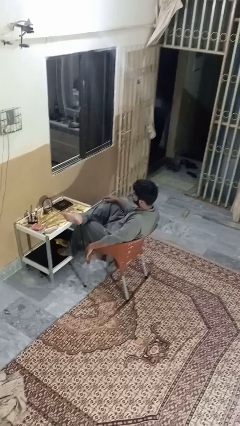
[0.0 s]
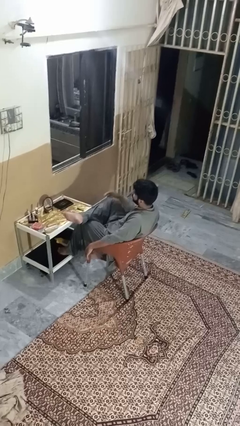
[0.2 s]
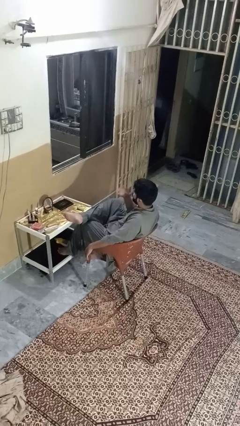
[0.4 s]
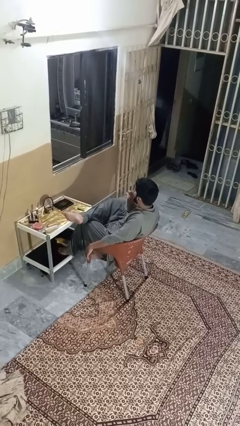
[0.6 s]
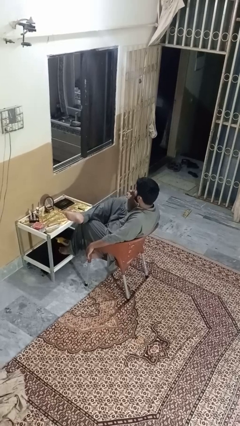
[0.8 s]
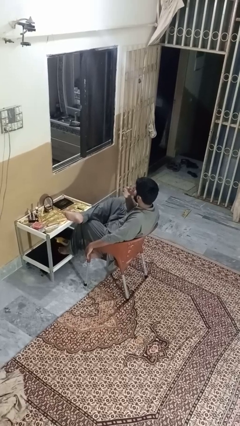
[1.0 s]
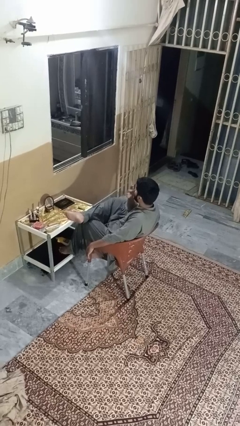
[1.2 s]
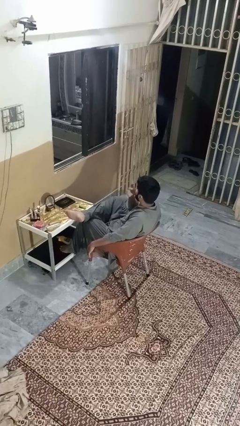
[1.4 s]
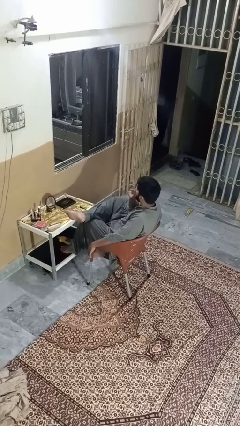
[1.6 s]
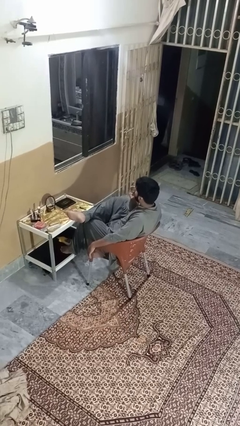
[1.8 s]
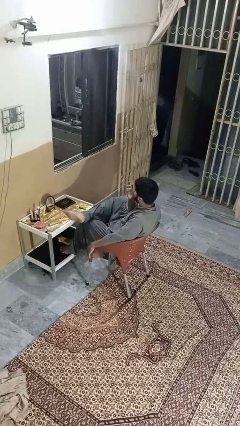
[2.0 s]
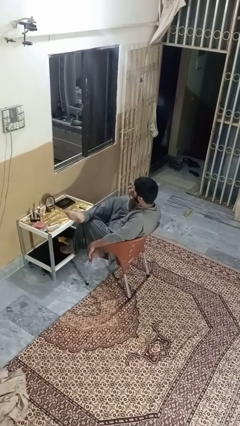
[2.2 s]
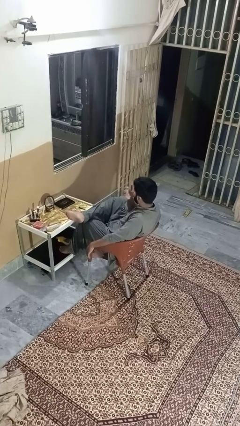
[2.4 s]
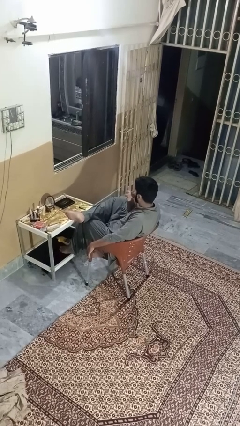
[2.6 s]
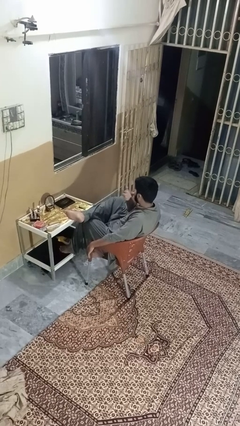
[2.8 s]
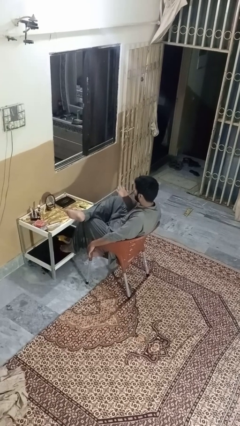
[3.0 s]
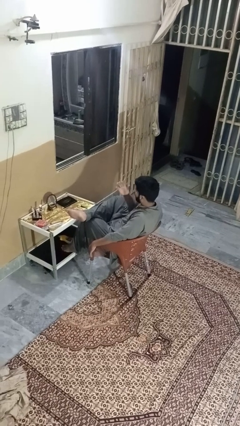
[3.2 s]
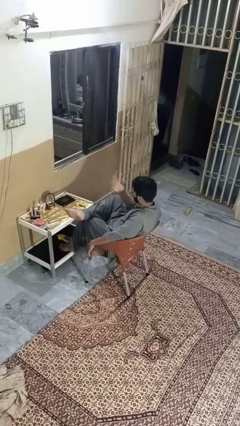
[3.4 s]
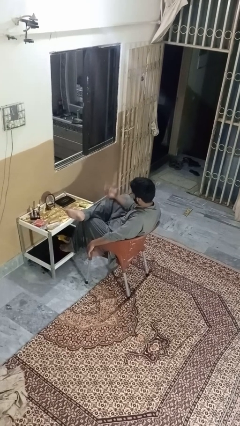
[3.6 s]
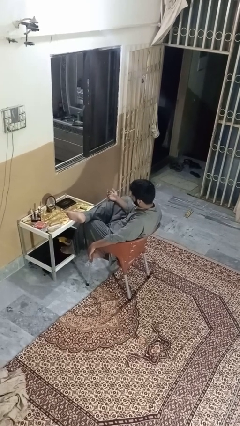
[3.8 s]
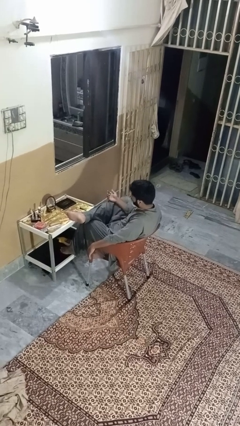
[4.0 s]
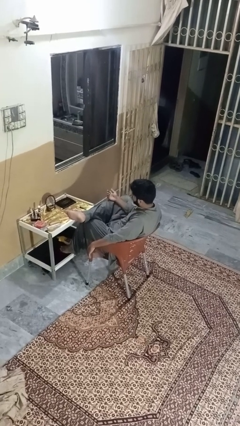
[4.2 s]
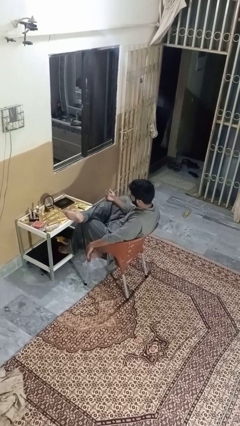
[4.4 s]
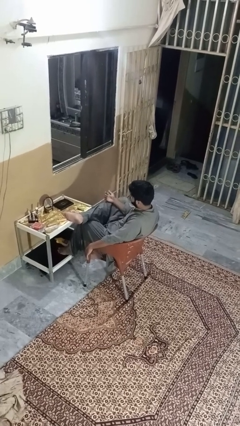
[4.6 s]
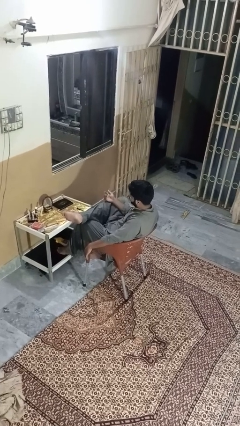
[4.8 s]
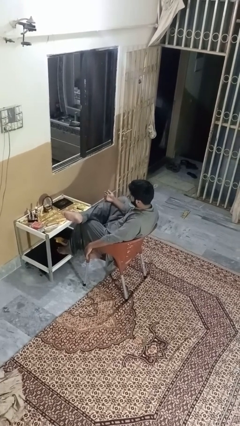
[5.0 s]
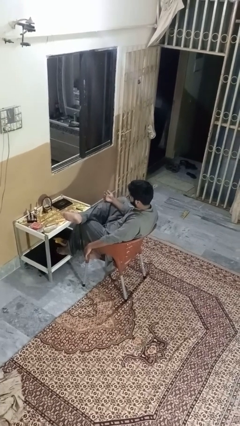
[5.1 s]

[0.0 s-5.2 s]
person licks fingers

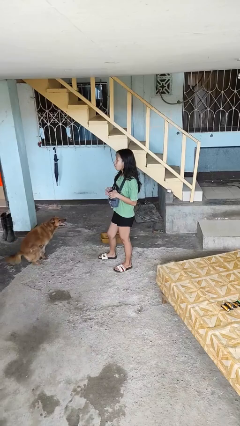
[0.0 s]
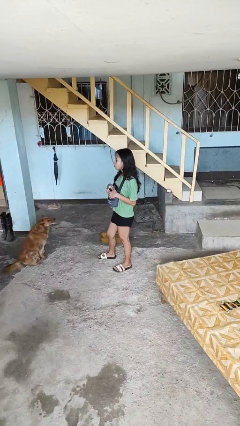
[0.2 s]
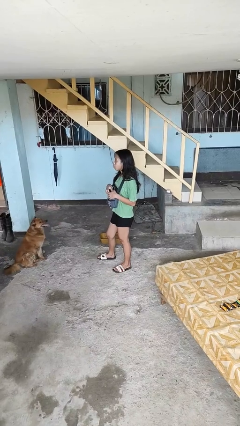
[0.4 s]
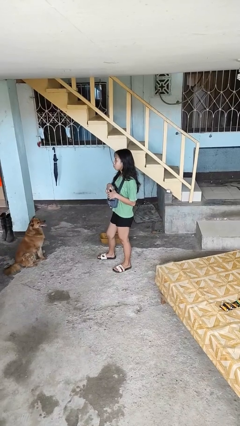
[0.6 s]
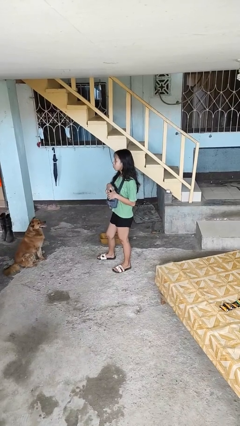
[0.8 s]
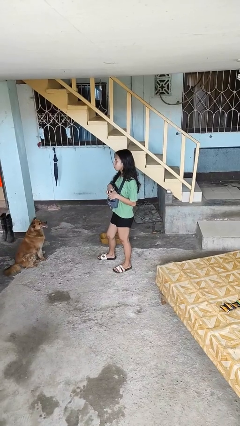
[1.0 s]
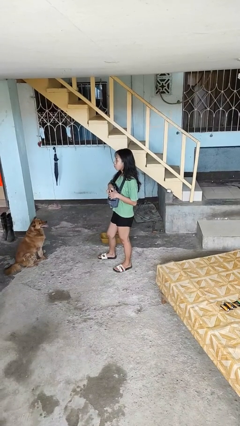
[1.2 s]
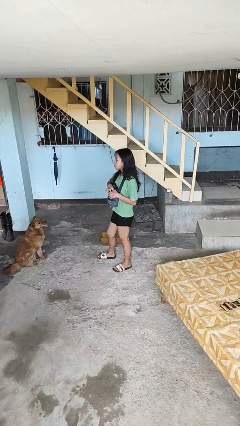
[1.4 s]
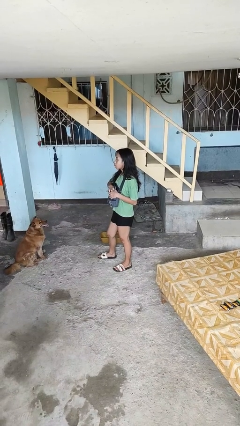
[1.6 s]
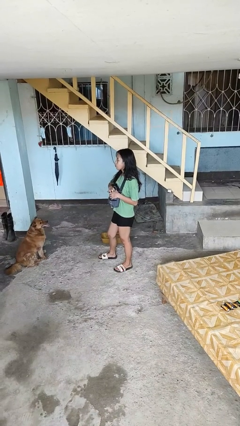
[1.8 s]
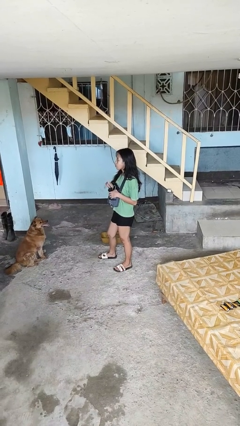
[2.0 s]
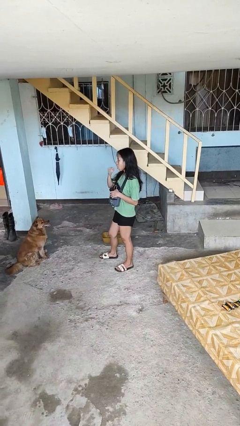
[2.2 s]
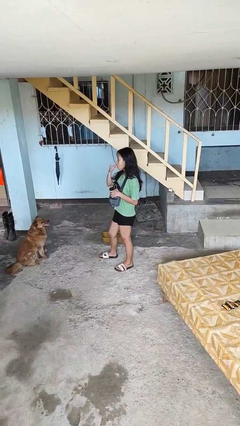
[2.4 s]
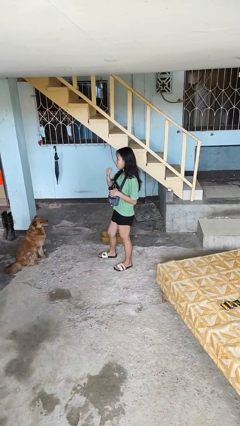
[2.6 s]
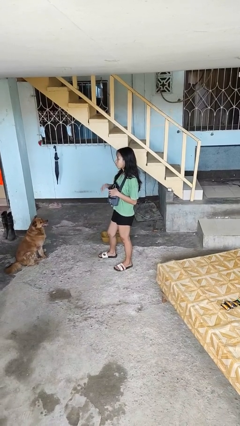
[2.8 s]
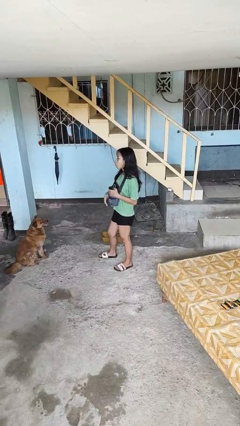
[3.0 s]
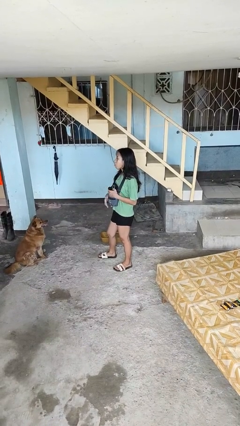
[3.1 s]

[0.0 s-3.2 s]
person eats snack from bag

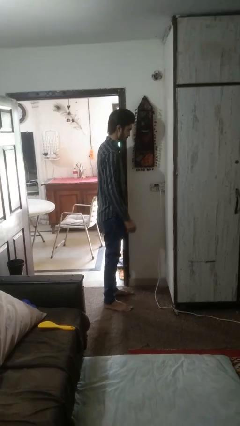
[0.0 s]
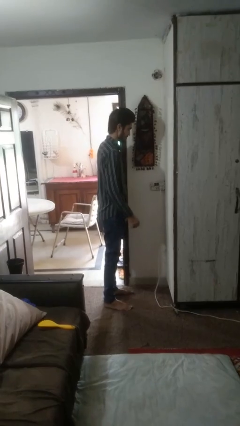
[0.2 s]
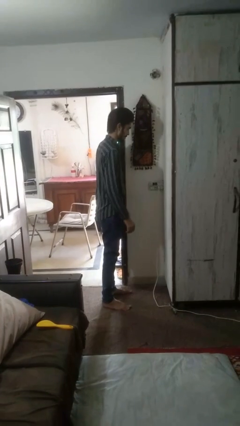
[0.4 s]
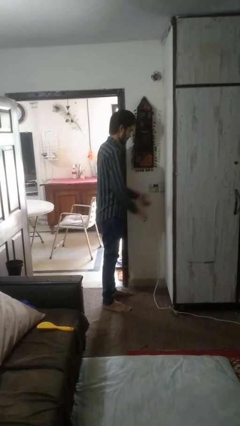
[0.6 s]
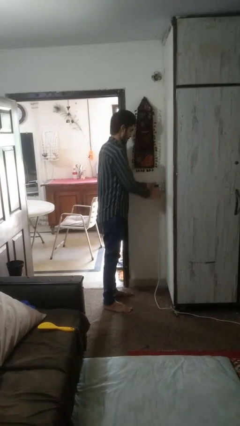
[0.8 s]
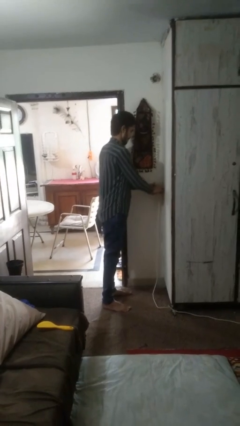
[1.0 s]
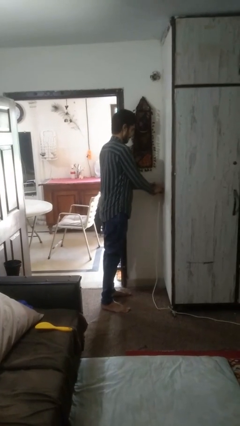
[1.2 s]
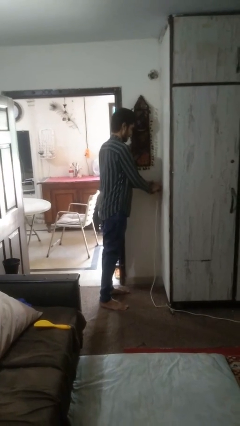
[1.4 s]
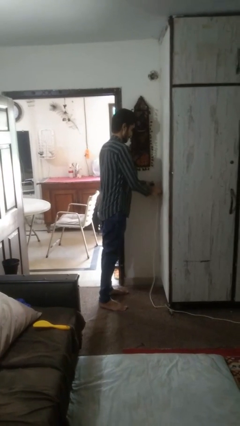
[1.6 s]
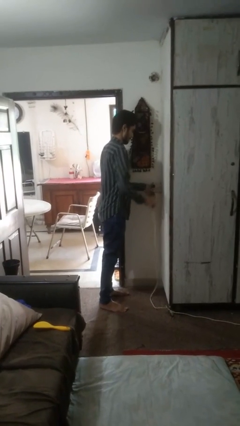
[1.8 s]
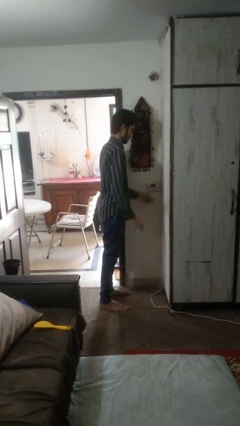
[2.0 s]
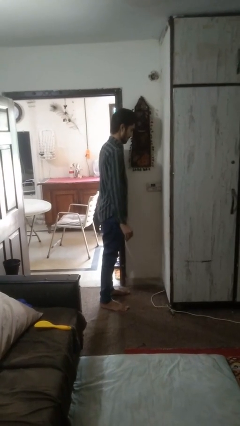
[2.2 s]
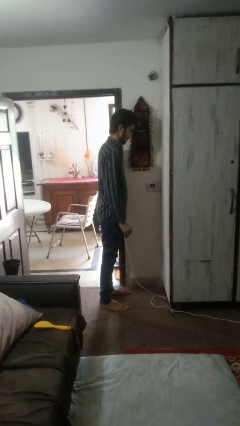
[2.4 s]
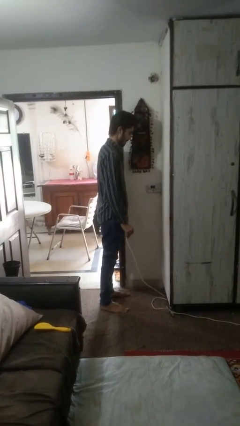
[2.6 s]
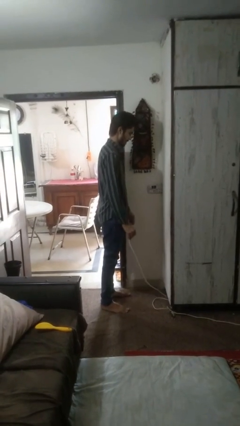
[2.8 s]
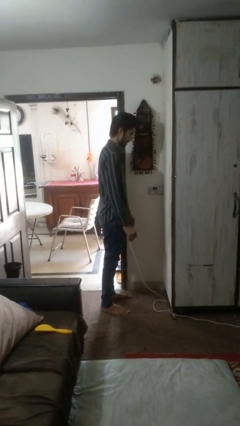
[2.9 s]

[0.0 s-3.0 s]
person unplugs from electrical socket

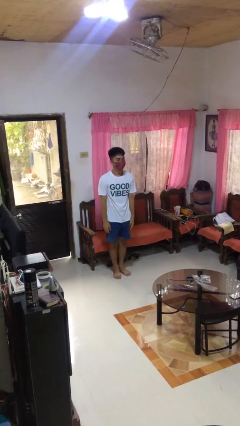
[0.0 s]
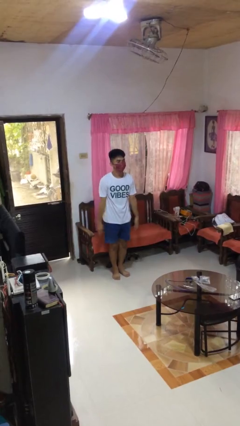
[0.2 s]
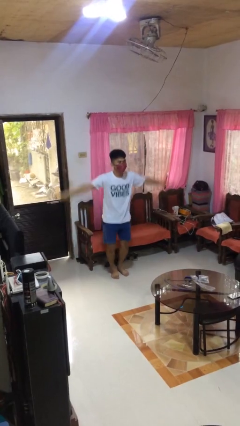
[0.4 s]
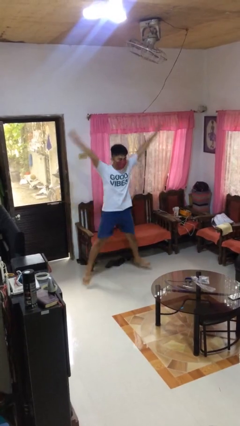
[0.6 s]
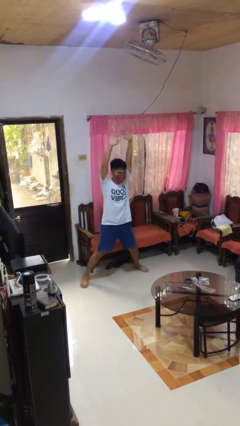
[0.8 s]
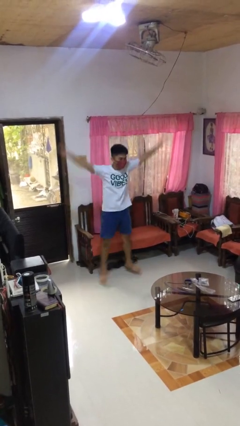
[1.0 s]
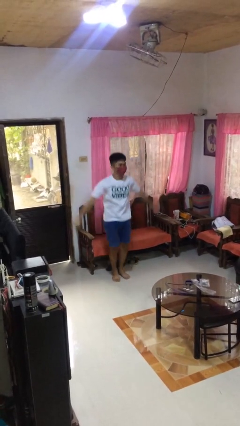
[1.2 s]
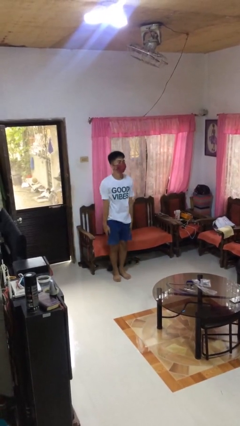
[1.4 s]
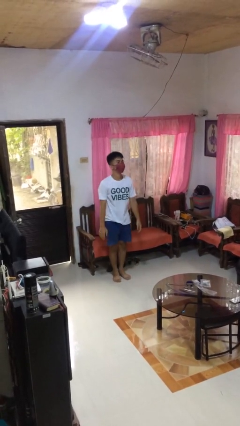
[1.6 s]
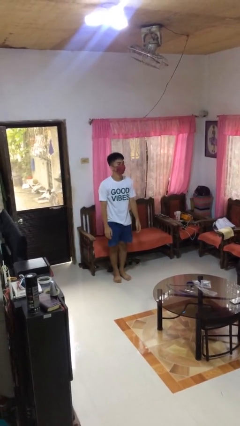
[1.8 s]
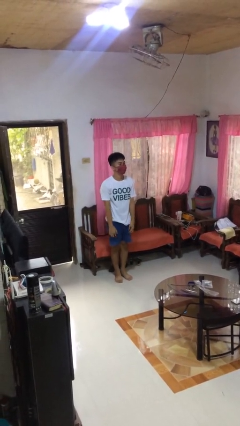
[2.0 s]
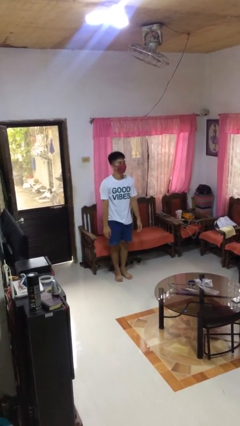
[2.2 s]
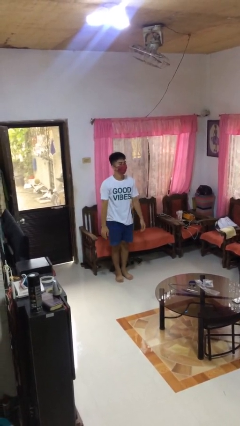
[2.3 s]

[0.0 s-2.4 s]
person exercises with jumping jacks

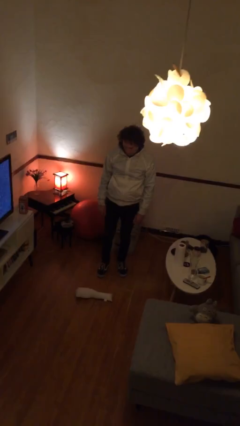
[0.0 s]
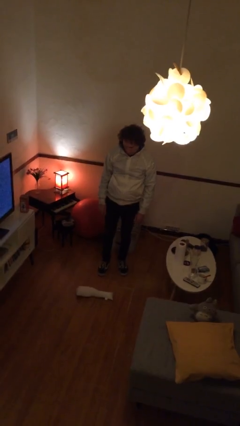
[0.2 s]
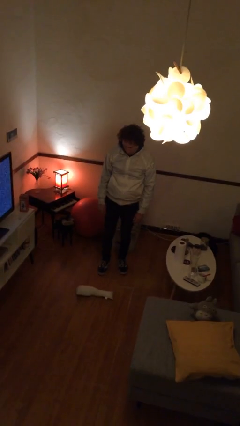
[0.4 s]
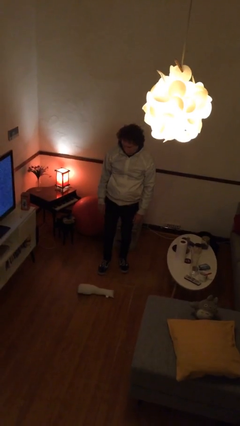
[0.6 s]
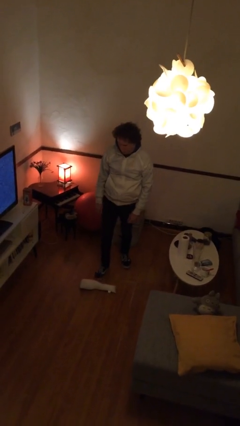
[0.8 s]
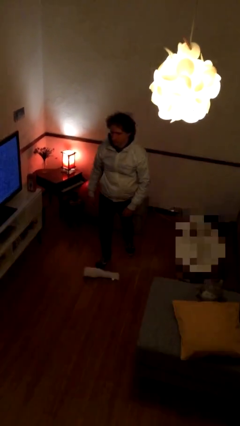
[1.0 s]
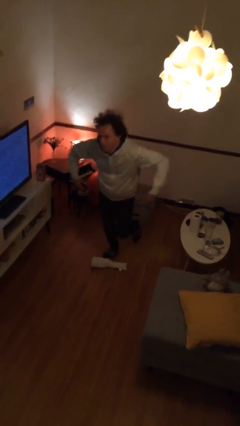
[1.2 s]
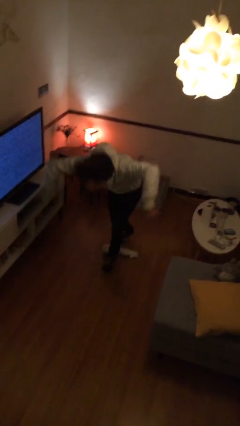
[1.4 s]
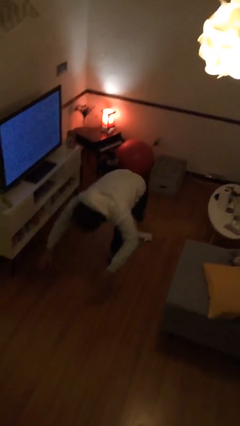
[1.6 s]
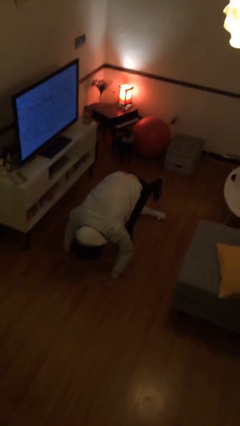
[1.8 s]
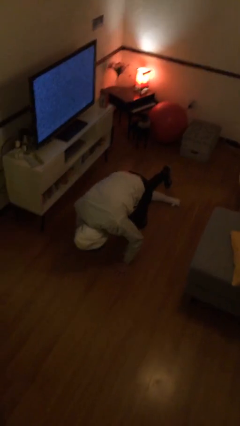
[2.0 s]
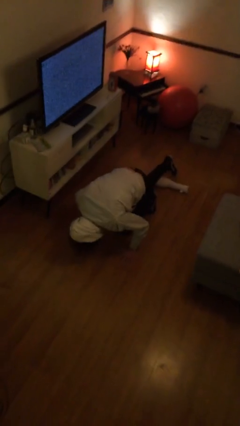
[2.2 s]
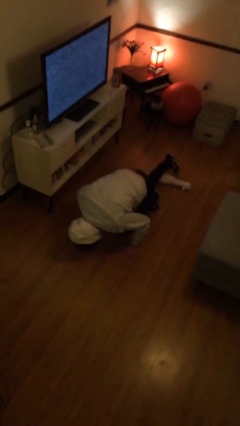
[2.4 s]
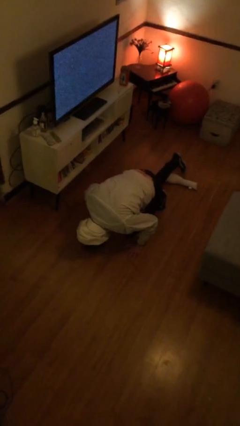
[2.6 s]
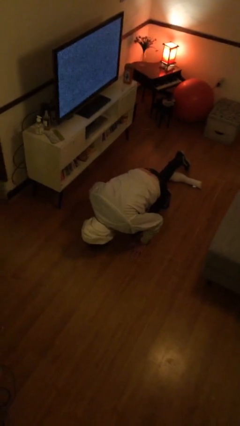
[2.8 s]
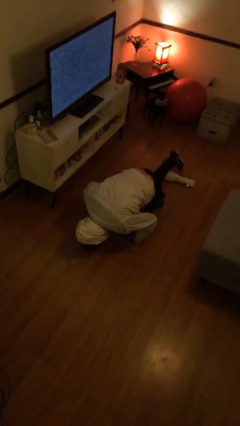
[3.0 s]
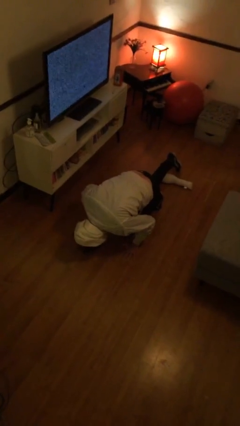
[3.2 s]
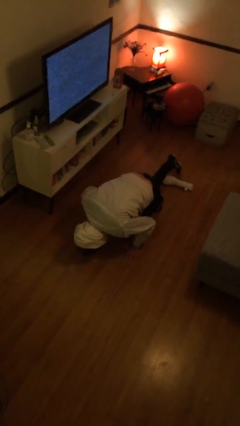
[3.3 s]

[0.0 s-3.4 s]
person trips on object on floor

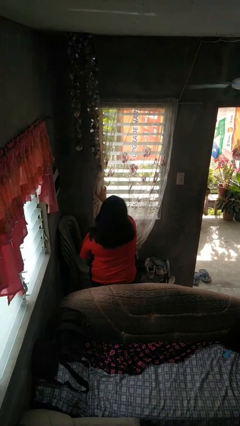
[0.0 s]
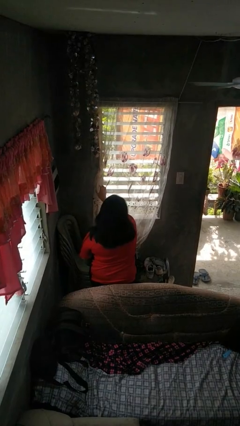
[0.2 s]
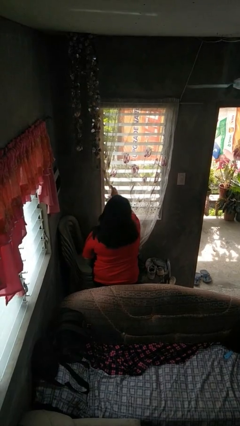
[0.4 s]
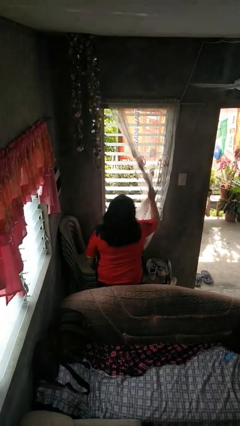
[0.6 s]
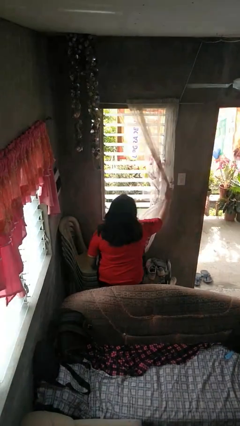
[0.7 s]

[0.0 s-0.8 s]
person opens curtains
